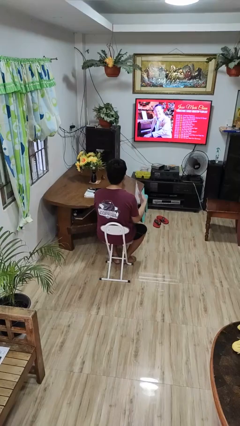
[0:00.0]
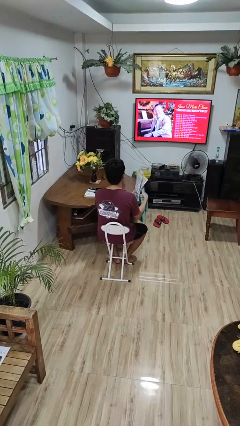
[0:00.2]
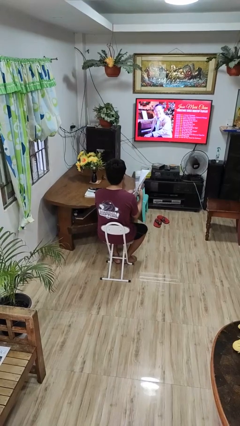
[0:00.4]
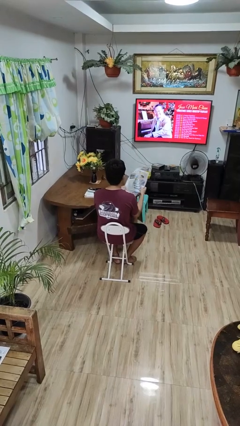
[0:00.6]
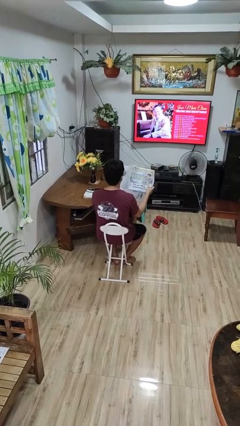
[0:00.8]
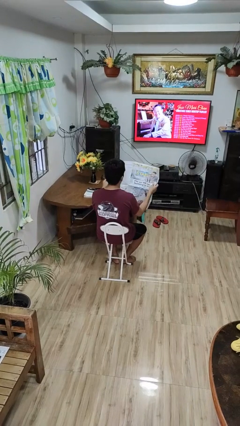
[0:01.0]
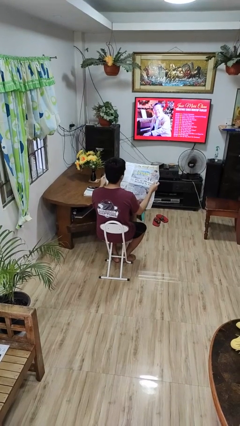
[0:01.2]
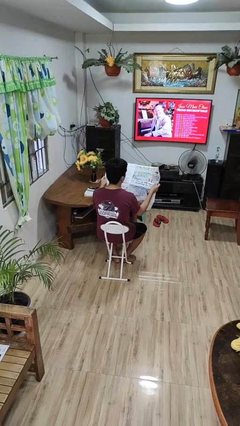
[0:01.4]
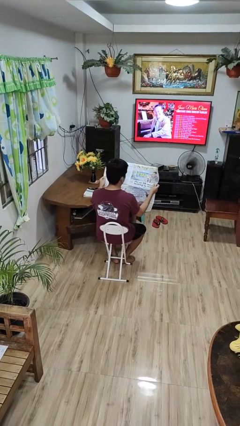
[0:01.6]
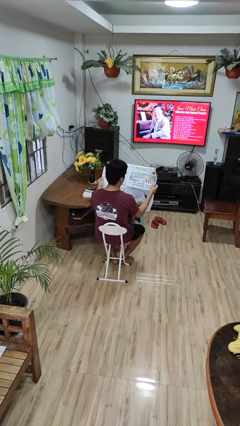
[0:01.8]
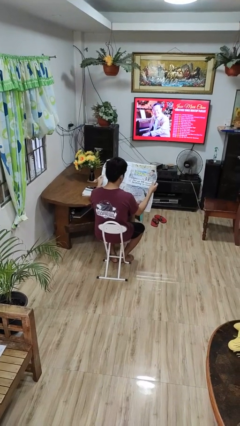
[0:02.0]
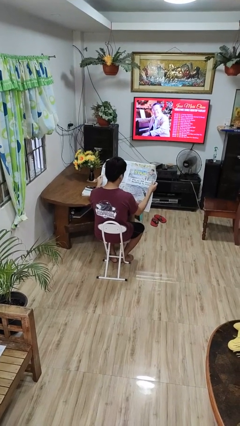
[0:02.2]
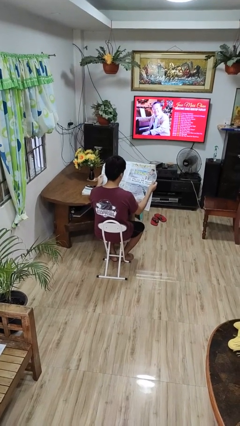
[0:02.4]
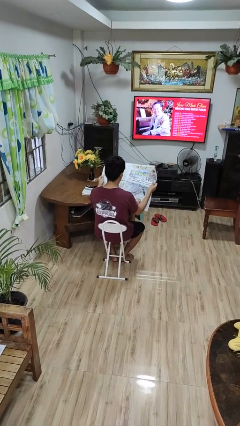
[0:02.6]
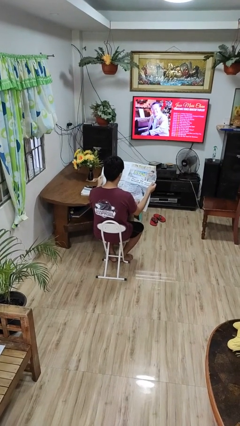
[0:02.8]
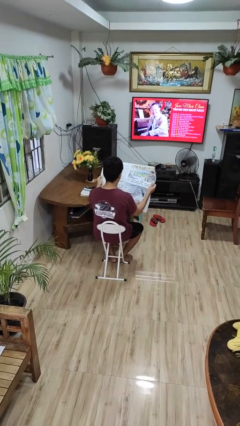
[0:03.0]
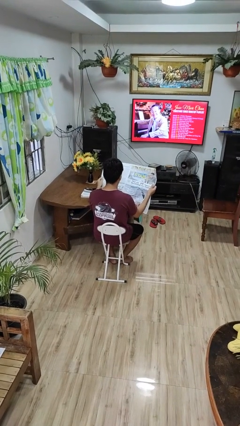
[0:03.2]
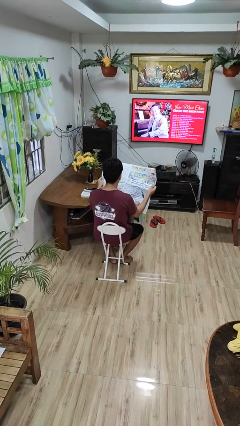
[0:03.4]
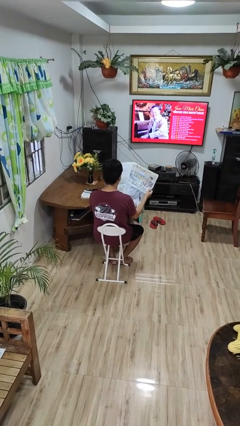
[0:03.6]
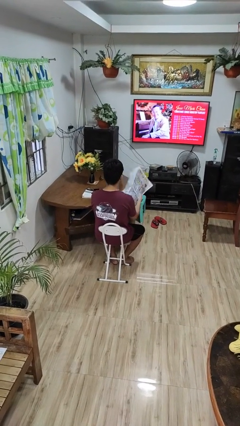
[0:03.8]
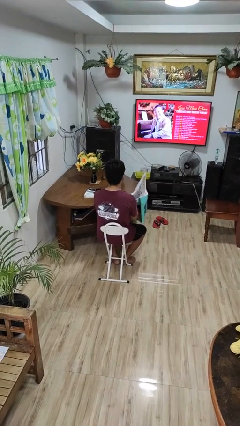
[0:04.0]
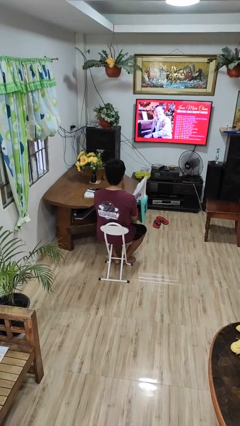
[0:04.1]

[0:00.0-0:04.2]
person reads newspaper

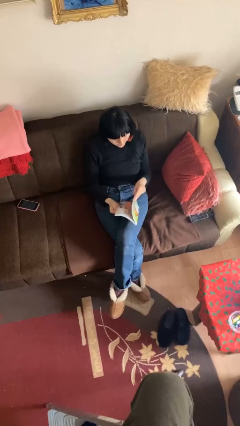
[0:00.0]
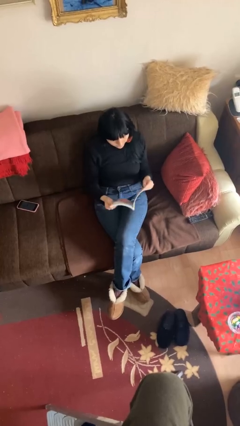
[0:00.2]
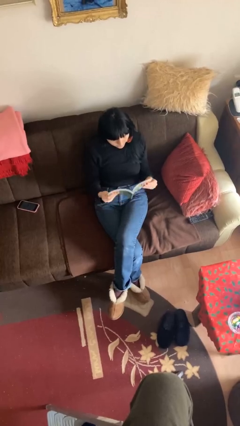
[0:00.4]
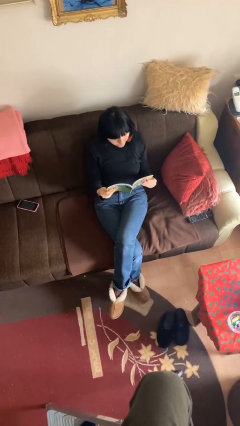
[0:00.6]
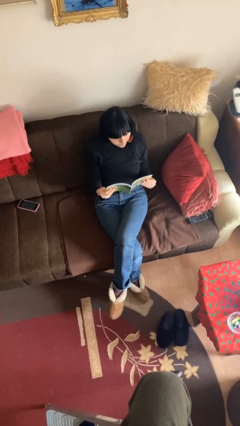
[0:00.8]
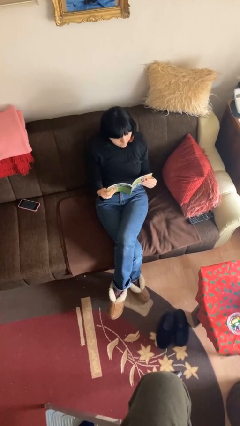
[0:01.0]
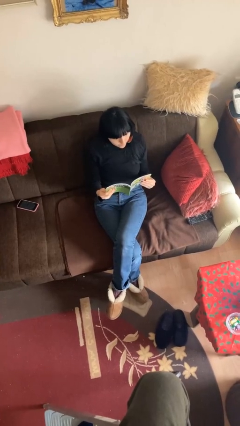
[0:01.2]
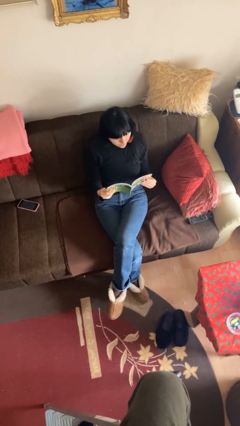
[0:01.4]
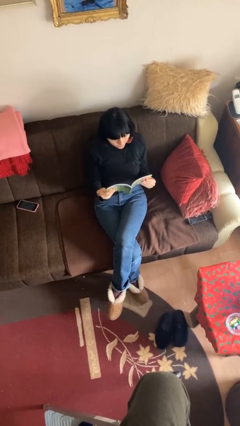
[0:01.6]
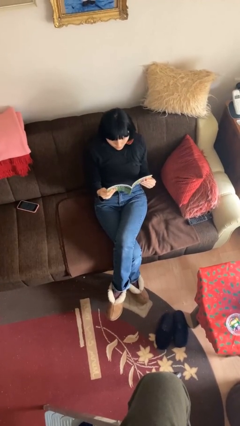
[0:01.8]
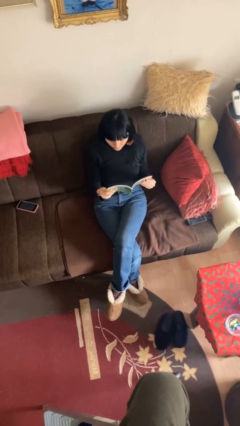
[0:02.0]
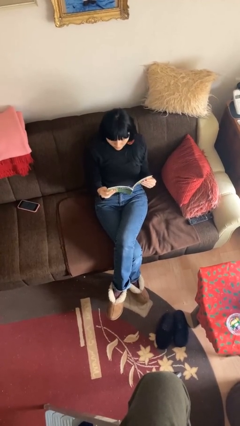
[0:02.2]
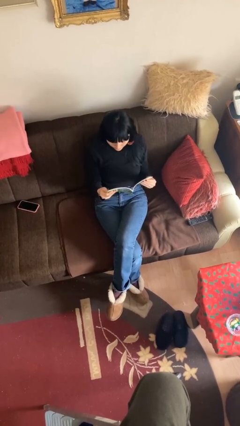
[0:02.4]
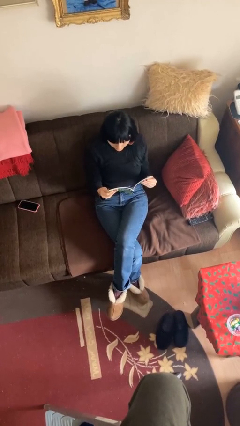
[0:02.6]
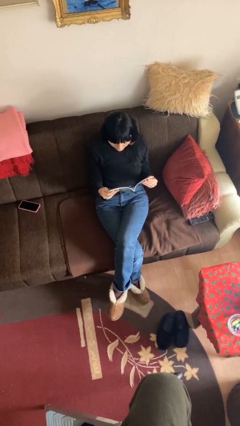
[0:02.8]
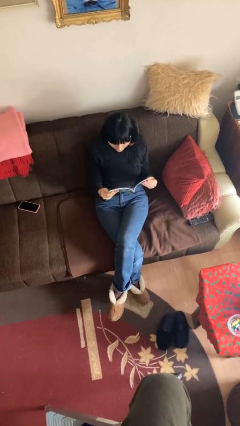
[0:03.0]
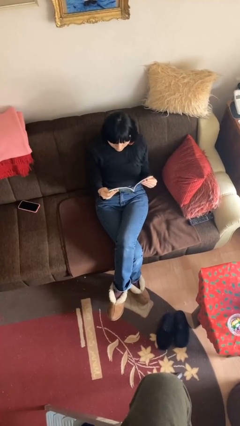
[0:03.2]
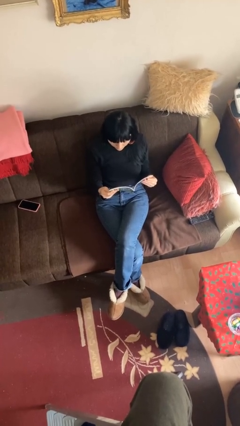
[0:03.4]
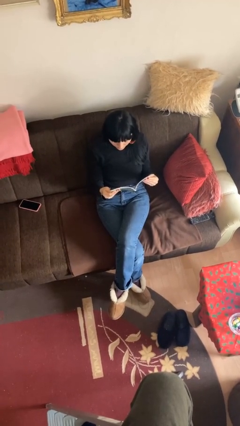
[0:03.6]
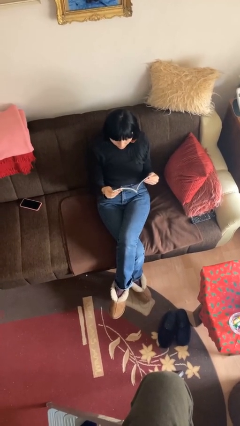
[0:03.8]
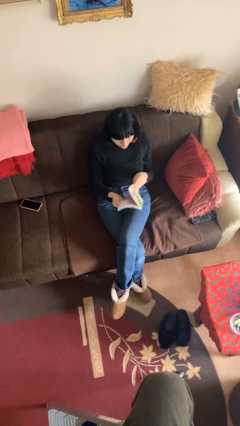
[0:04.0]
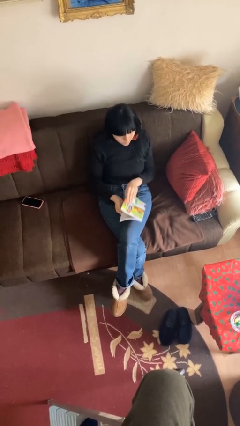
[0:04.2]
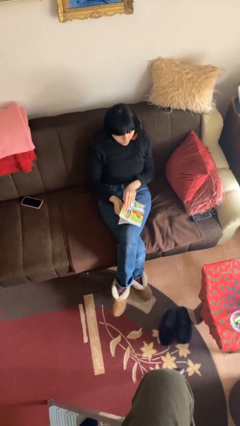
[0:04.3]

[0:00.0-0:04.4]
person reads document

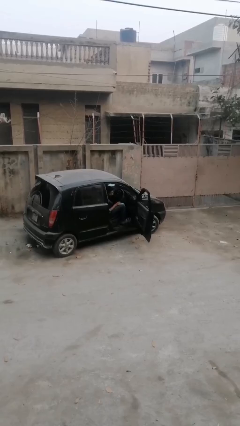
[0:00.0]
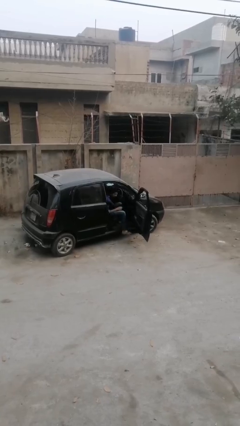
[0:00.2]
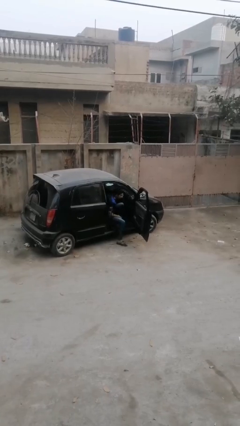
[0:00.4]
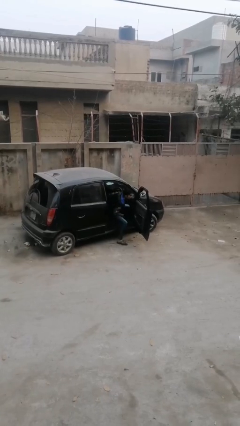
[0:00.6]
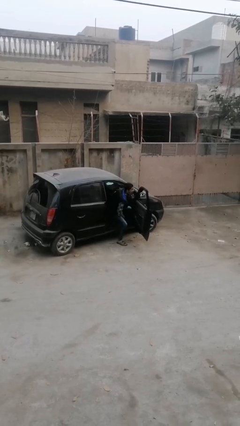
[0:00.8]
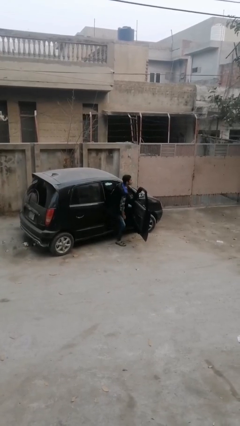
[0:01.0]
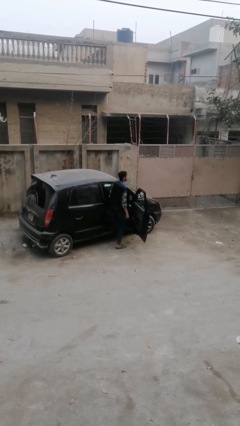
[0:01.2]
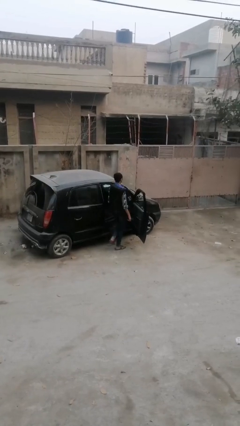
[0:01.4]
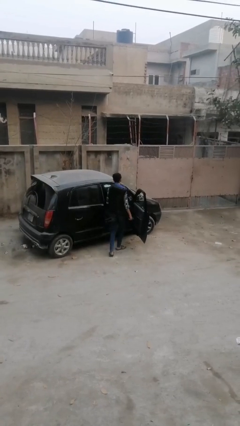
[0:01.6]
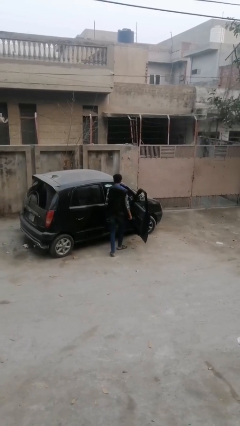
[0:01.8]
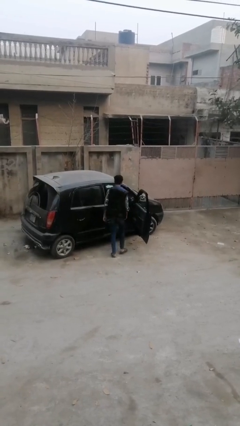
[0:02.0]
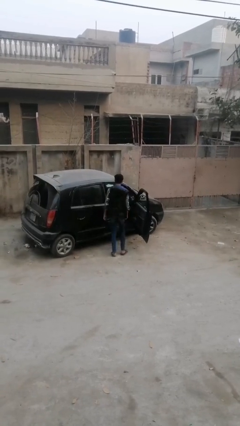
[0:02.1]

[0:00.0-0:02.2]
person exits car

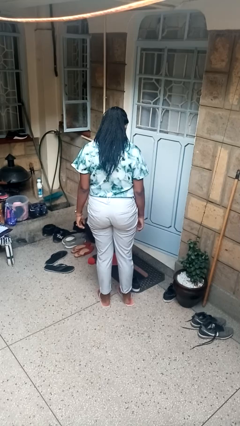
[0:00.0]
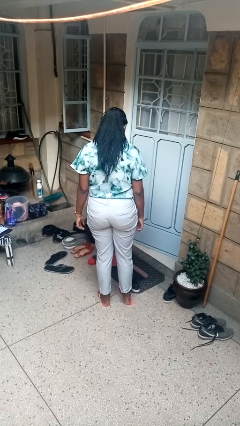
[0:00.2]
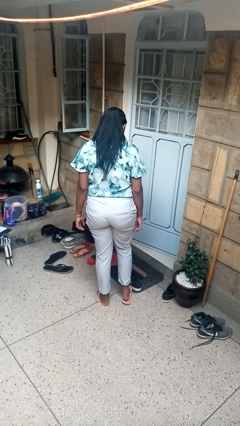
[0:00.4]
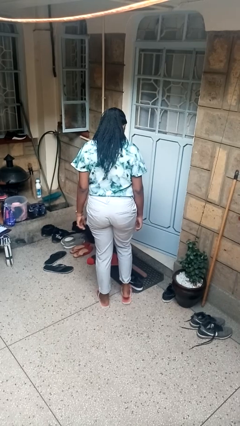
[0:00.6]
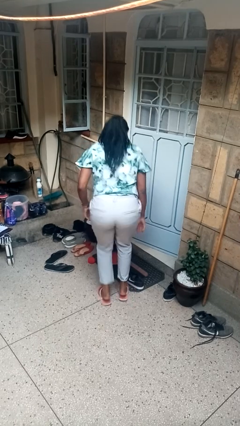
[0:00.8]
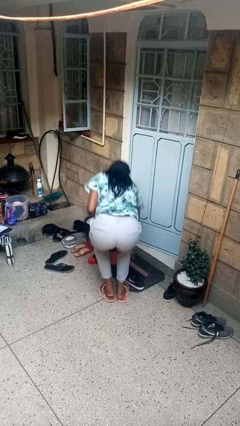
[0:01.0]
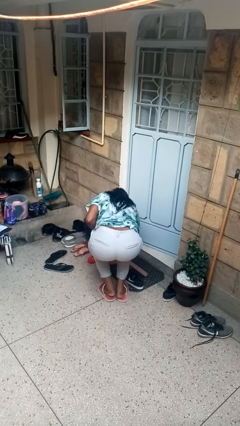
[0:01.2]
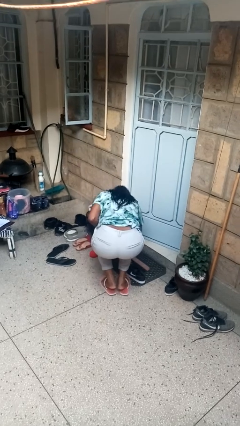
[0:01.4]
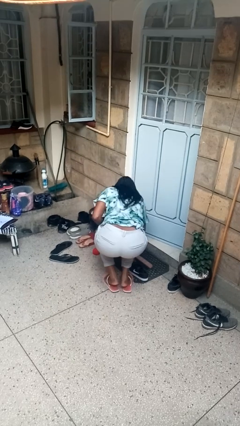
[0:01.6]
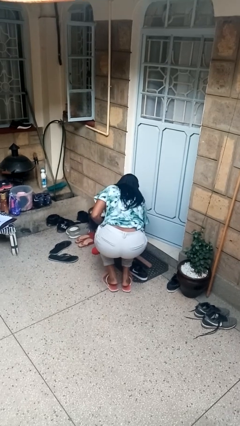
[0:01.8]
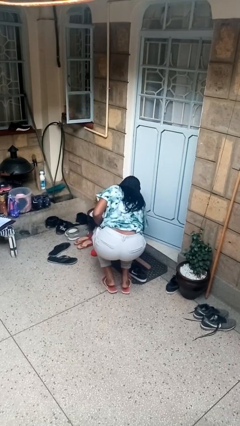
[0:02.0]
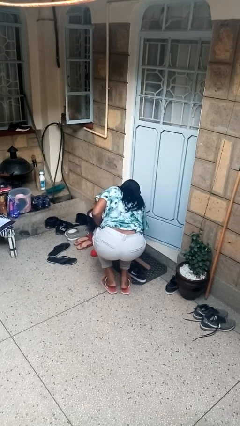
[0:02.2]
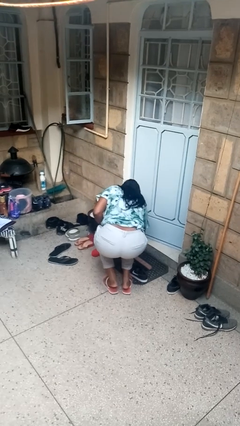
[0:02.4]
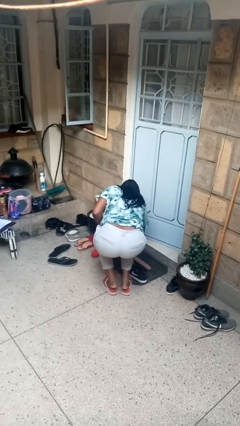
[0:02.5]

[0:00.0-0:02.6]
person trips on object on floor

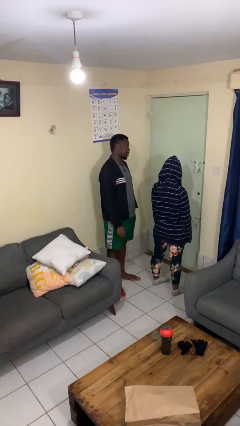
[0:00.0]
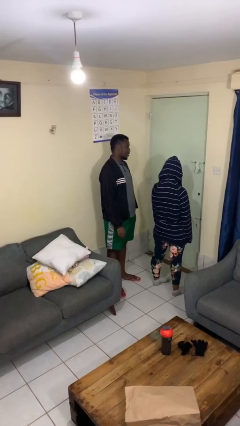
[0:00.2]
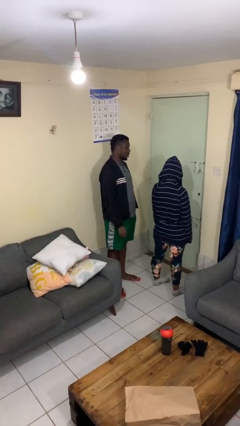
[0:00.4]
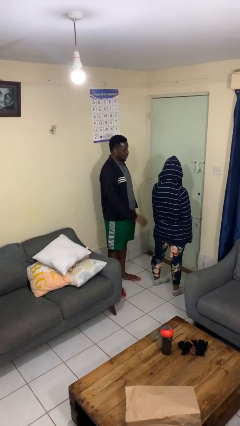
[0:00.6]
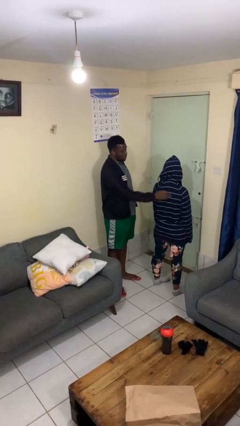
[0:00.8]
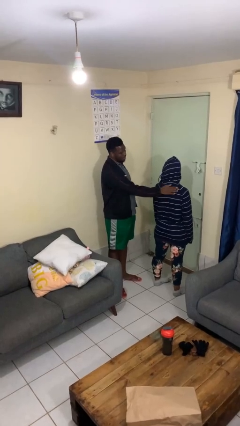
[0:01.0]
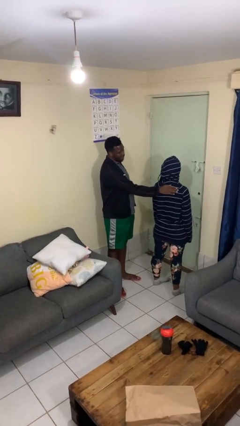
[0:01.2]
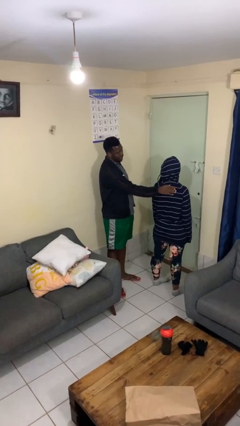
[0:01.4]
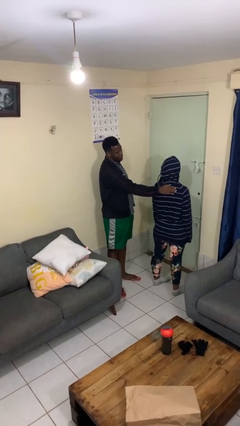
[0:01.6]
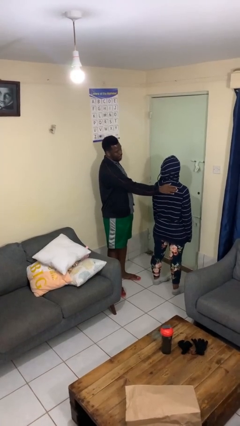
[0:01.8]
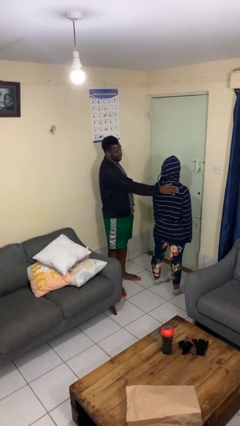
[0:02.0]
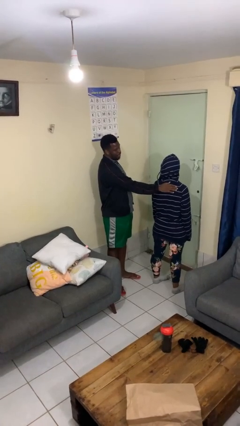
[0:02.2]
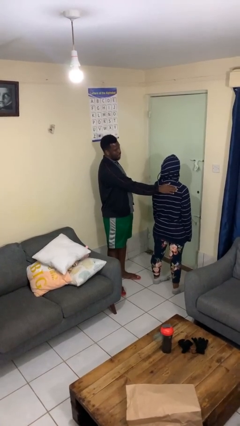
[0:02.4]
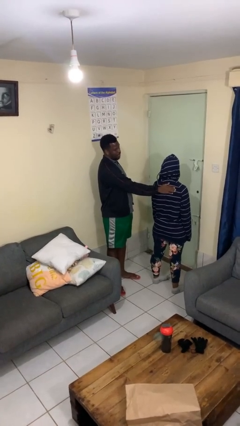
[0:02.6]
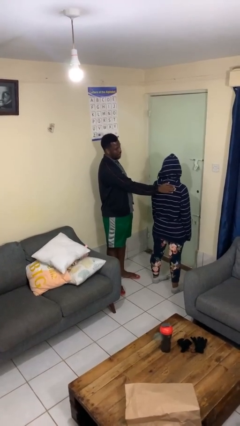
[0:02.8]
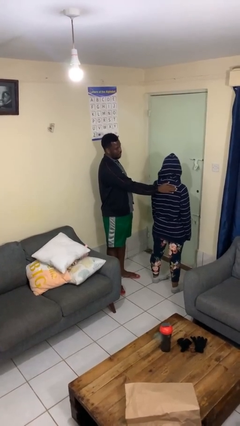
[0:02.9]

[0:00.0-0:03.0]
person touches back of person

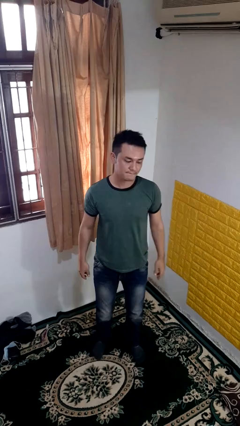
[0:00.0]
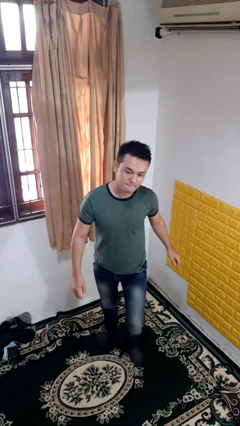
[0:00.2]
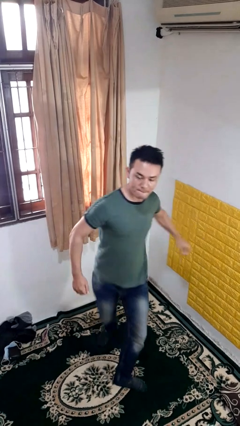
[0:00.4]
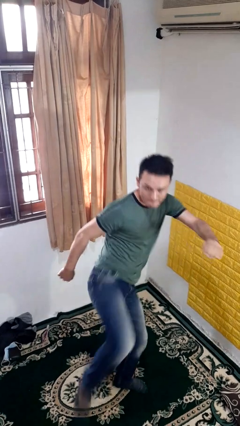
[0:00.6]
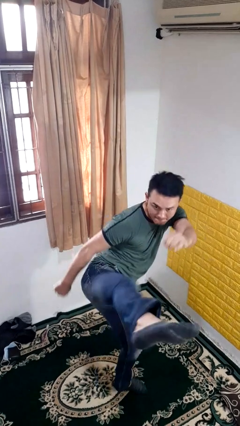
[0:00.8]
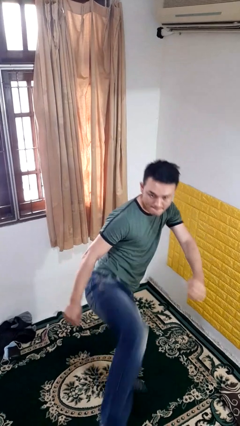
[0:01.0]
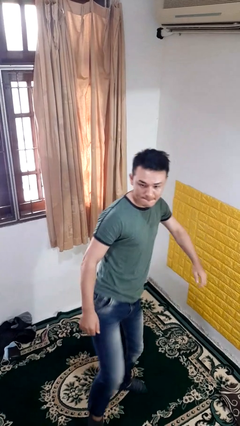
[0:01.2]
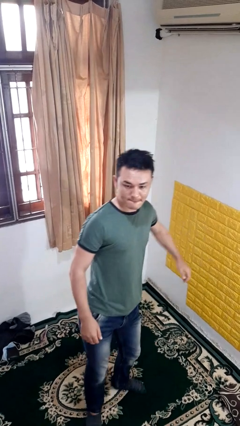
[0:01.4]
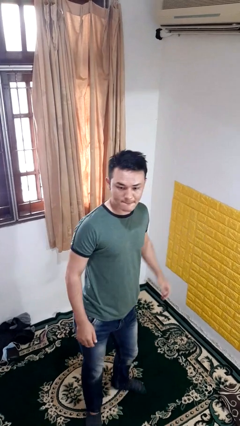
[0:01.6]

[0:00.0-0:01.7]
person karate kicks
